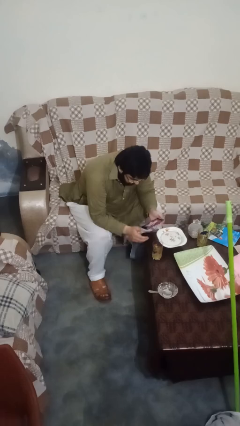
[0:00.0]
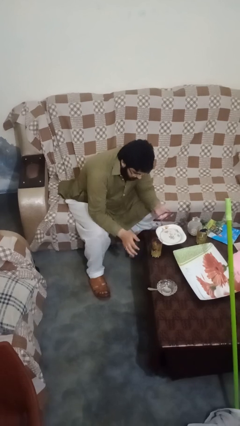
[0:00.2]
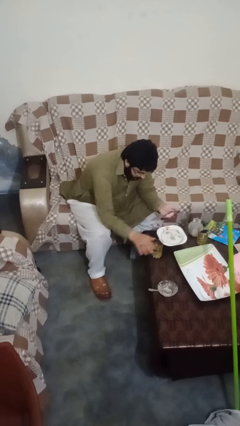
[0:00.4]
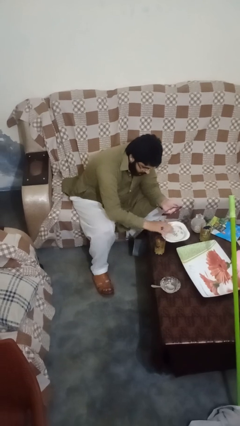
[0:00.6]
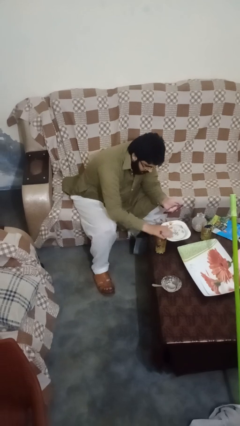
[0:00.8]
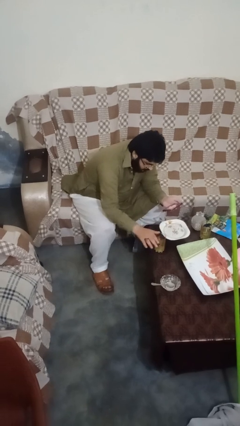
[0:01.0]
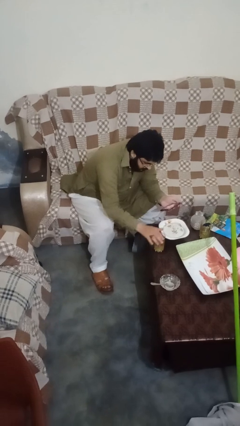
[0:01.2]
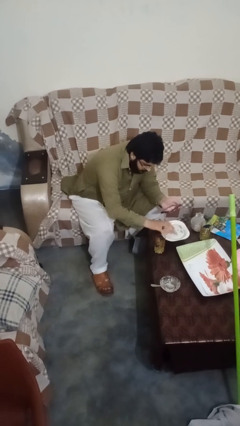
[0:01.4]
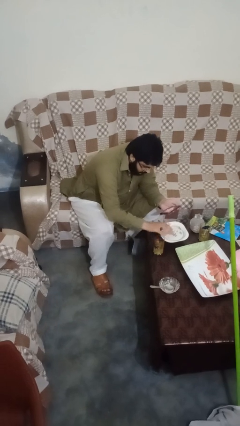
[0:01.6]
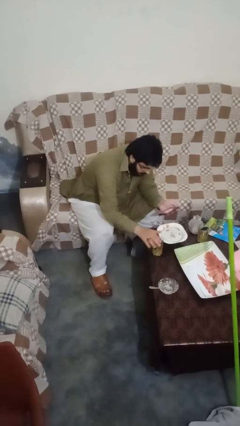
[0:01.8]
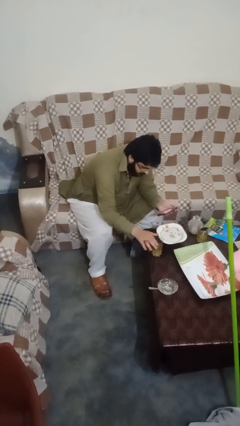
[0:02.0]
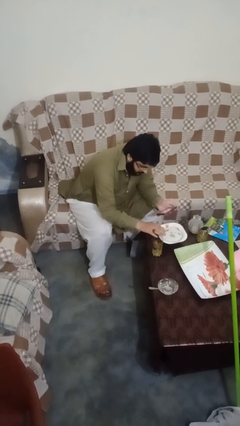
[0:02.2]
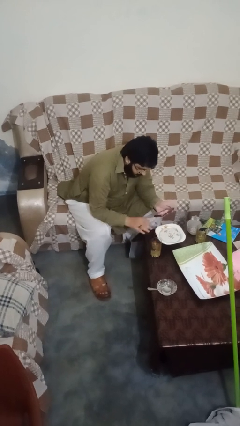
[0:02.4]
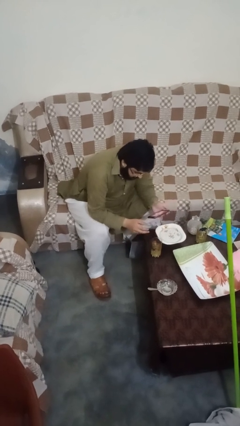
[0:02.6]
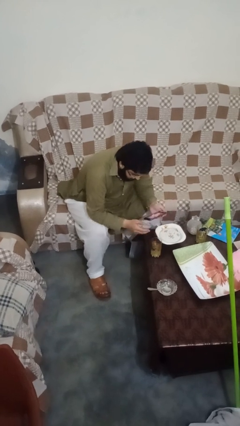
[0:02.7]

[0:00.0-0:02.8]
person waves hand over object

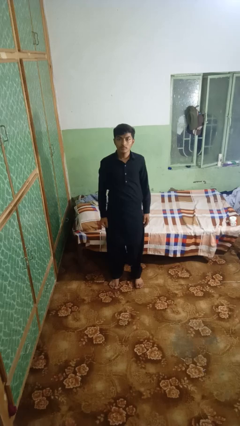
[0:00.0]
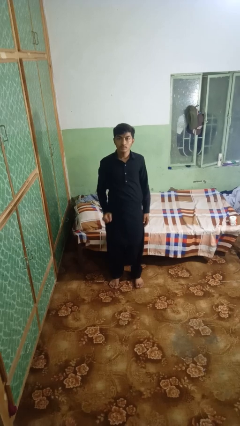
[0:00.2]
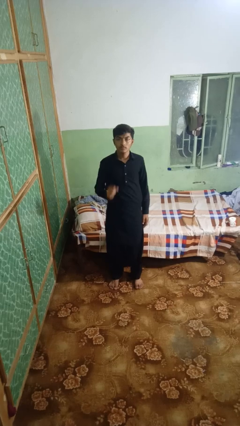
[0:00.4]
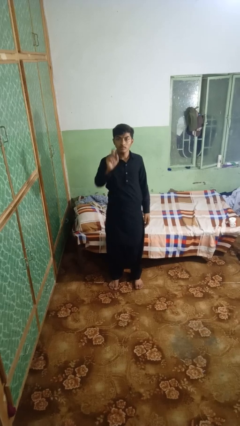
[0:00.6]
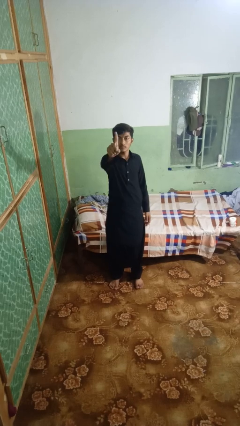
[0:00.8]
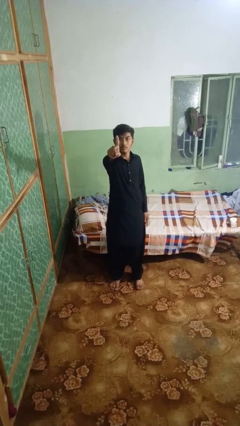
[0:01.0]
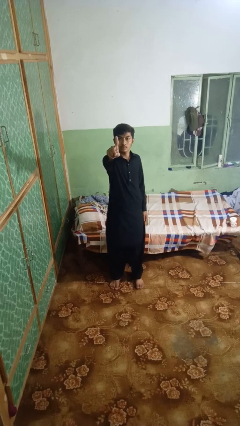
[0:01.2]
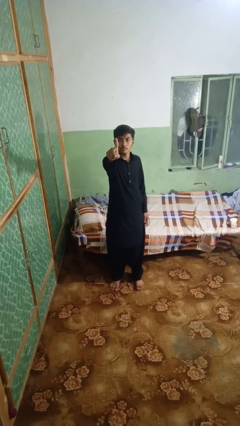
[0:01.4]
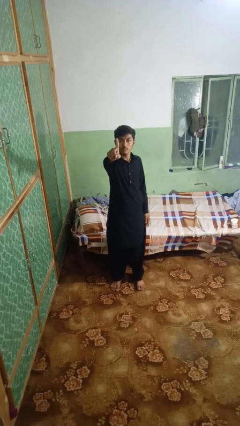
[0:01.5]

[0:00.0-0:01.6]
person gestures number one

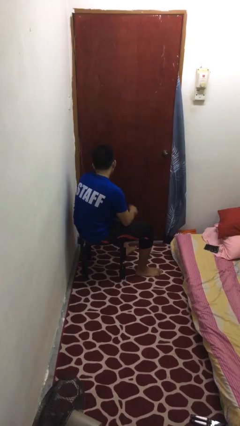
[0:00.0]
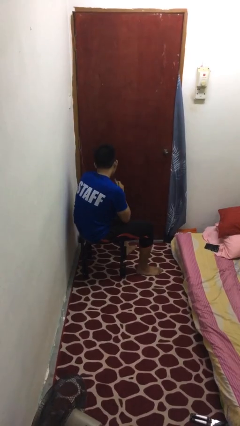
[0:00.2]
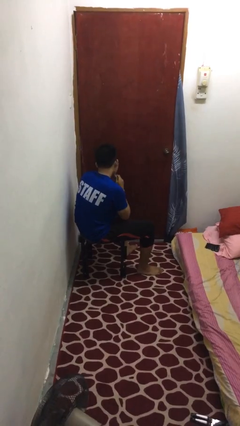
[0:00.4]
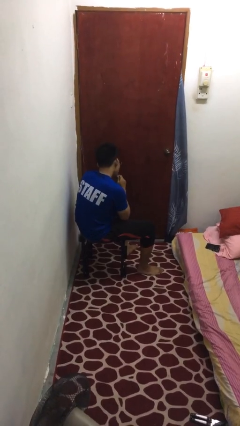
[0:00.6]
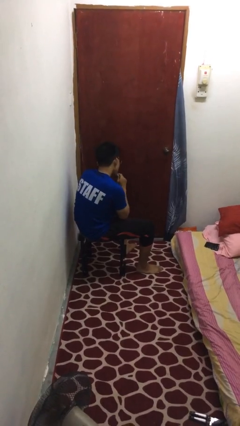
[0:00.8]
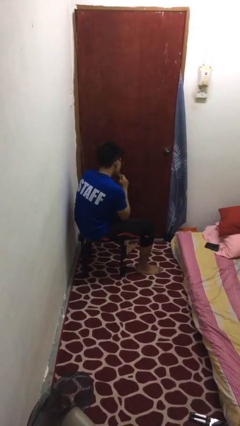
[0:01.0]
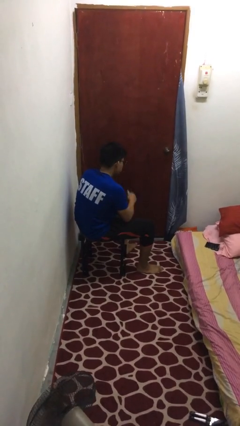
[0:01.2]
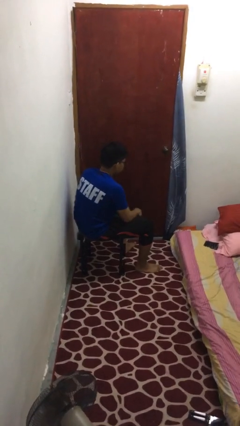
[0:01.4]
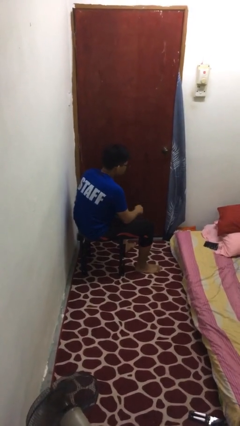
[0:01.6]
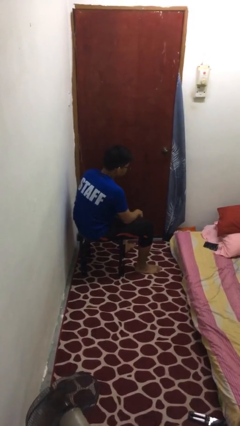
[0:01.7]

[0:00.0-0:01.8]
person vapes

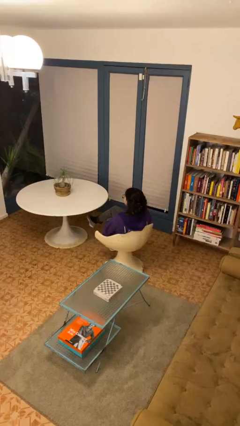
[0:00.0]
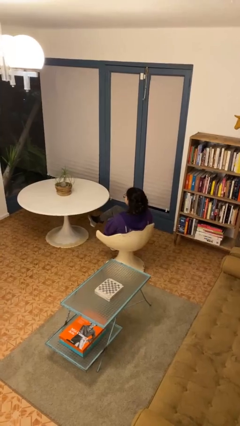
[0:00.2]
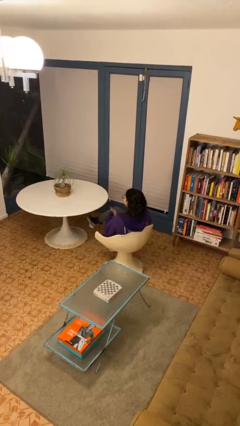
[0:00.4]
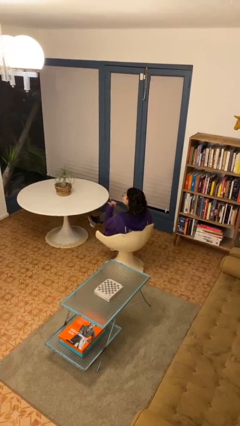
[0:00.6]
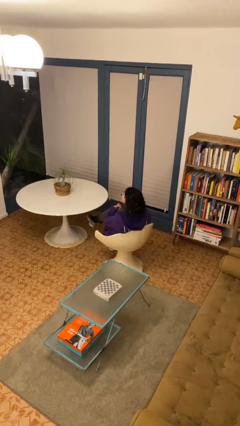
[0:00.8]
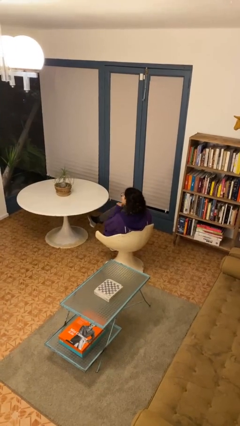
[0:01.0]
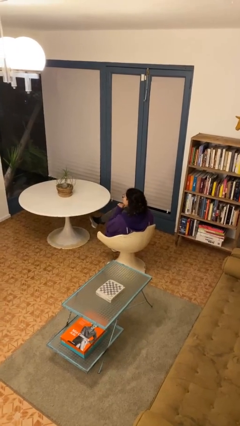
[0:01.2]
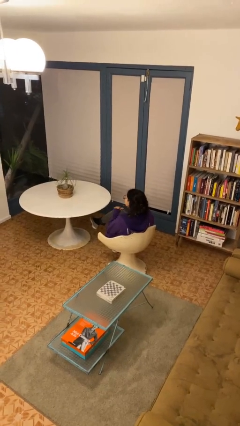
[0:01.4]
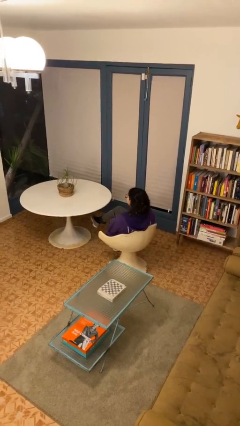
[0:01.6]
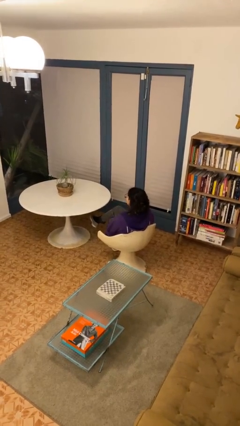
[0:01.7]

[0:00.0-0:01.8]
person gestures cut

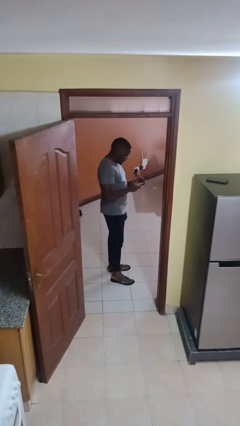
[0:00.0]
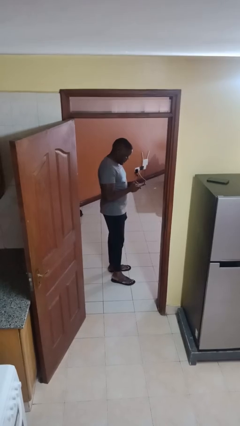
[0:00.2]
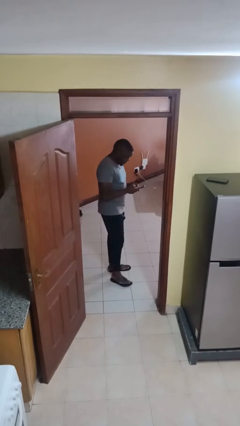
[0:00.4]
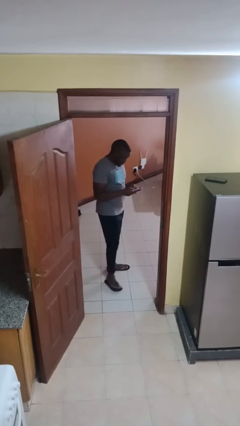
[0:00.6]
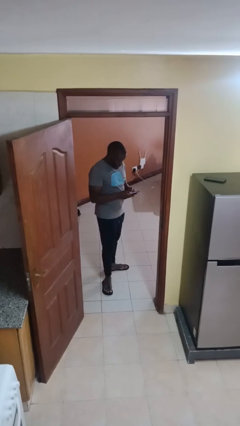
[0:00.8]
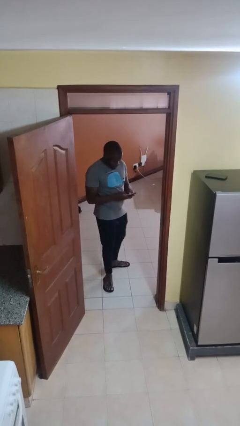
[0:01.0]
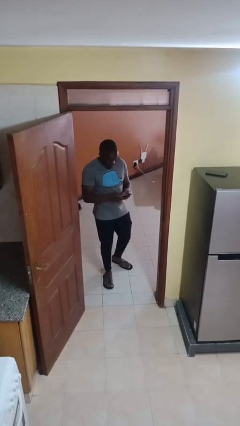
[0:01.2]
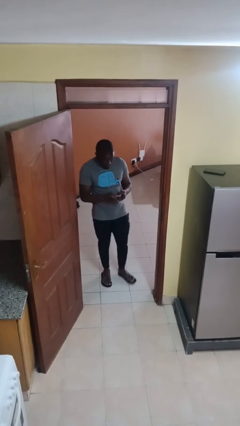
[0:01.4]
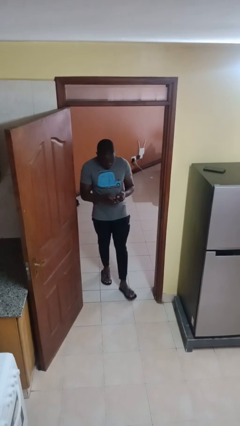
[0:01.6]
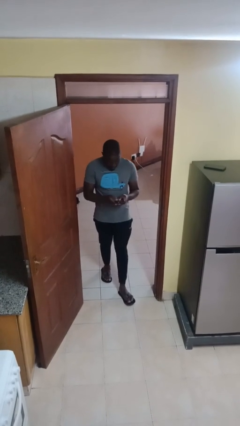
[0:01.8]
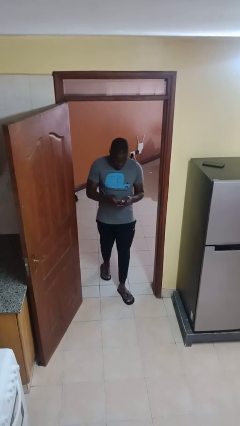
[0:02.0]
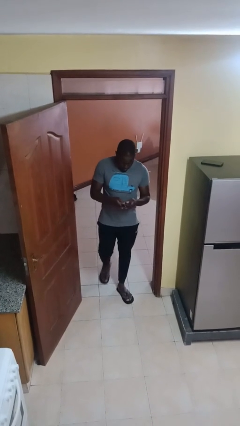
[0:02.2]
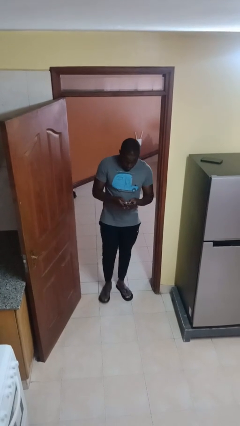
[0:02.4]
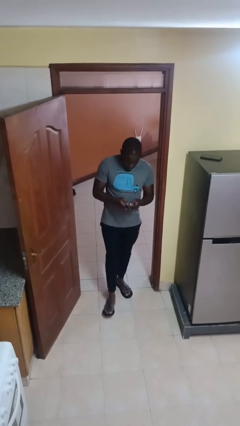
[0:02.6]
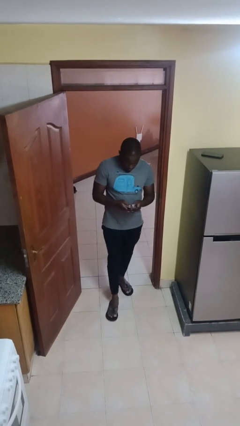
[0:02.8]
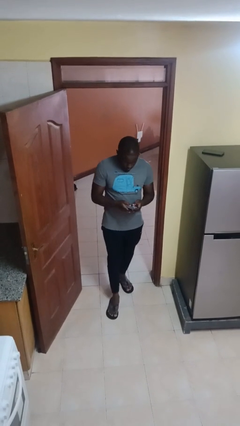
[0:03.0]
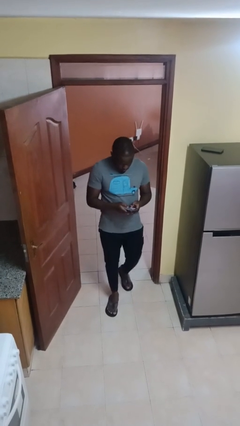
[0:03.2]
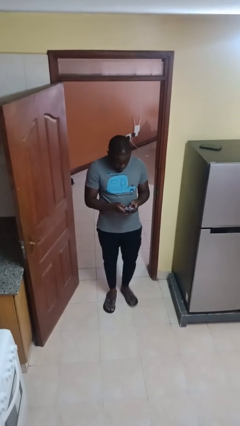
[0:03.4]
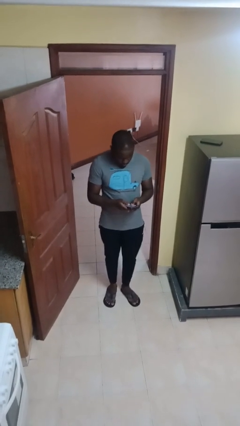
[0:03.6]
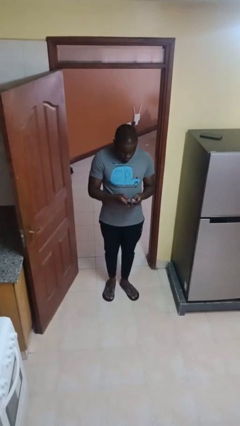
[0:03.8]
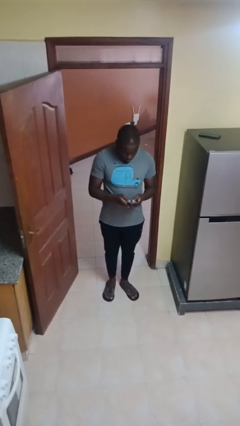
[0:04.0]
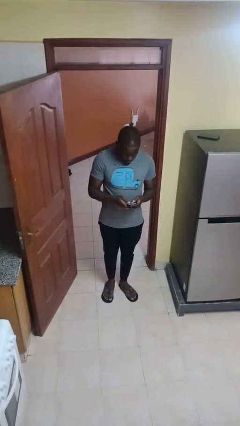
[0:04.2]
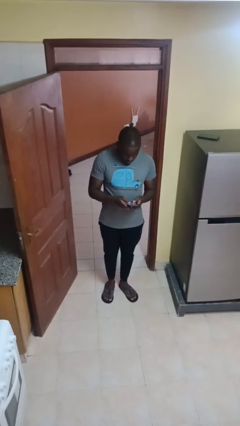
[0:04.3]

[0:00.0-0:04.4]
person enters scene through structure

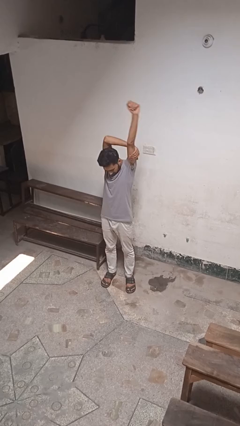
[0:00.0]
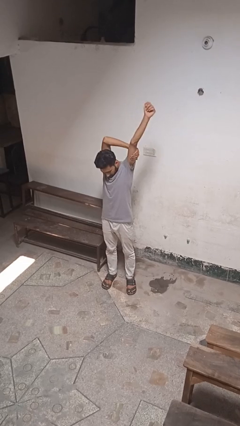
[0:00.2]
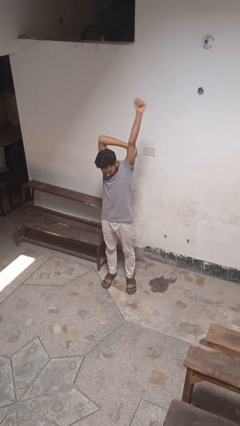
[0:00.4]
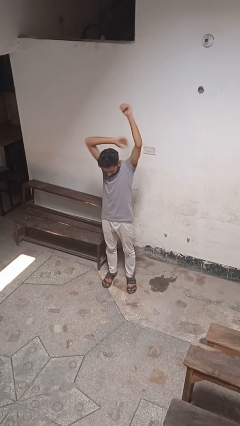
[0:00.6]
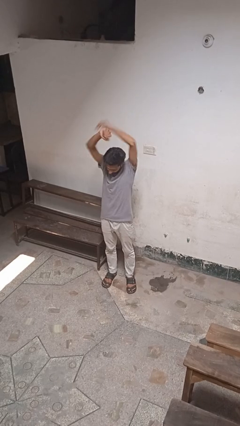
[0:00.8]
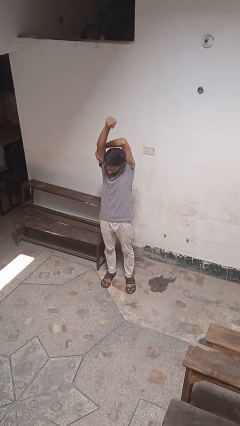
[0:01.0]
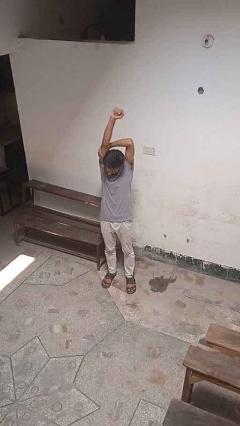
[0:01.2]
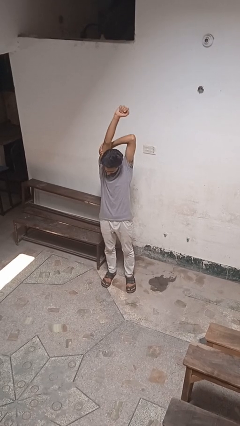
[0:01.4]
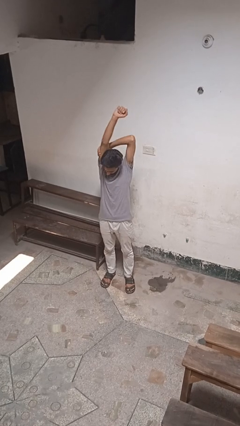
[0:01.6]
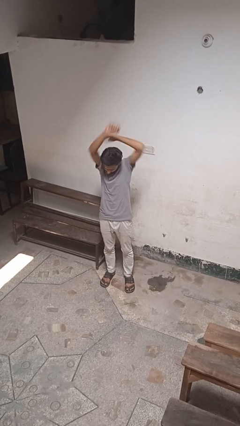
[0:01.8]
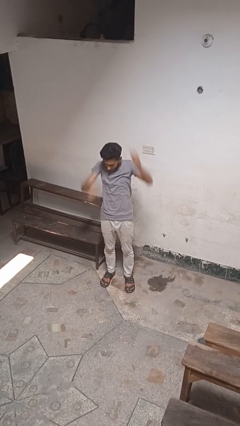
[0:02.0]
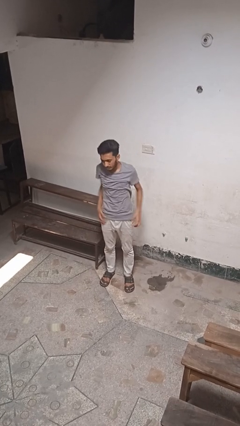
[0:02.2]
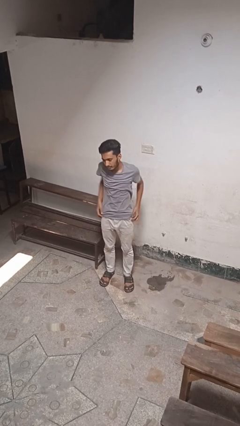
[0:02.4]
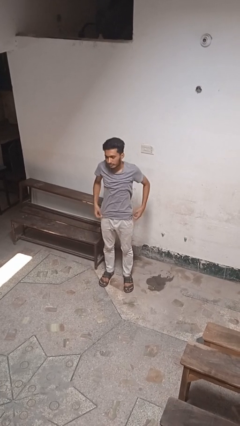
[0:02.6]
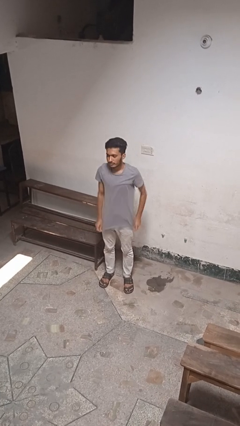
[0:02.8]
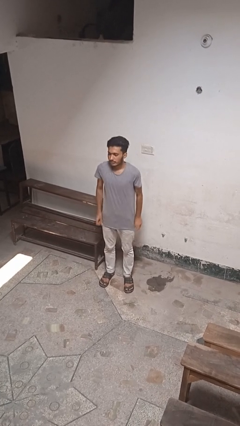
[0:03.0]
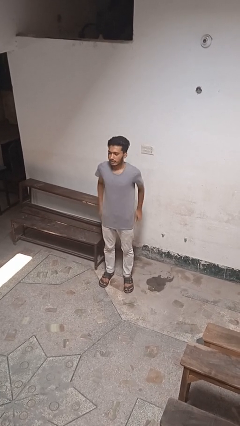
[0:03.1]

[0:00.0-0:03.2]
person puts feet up

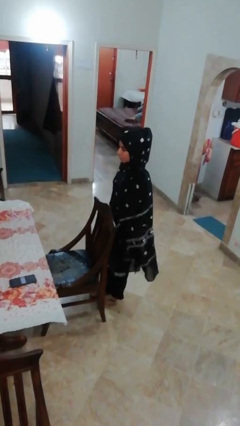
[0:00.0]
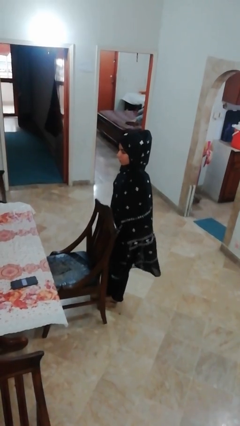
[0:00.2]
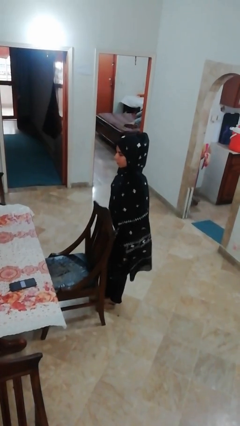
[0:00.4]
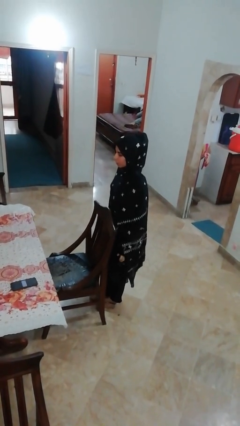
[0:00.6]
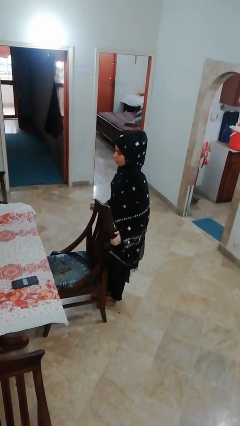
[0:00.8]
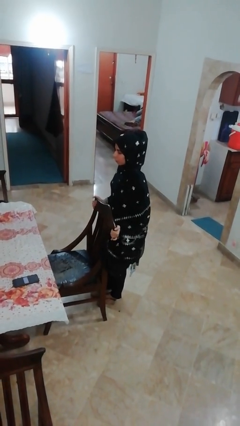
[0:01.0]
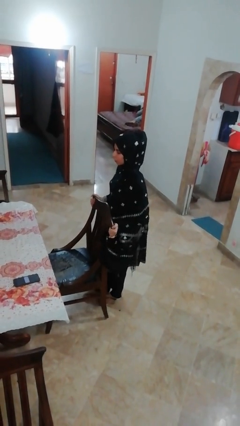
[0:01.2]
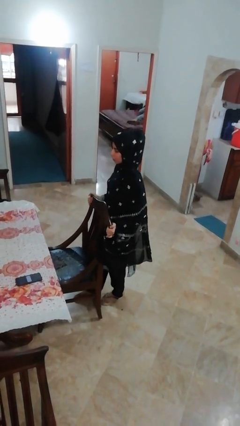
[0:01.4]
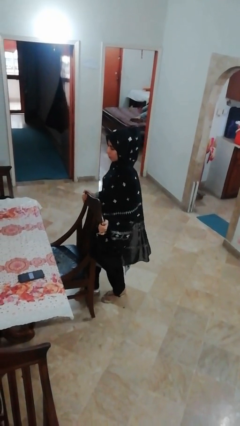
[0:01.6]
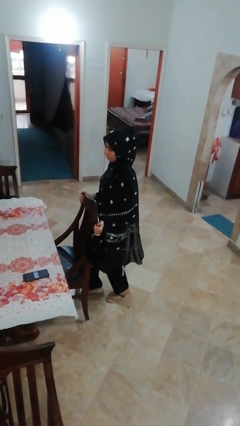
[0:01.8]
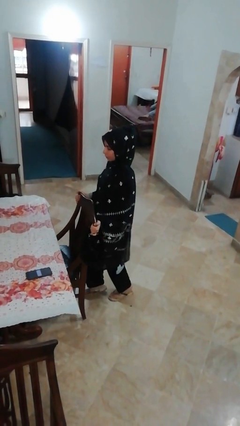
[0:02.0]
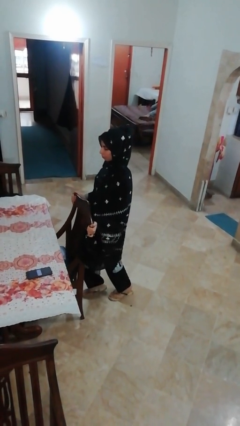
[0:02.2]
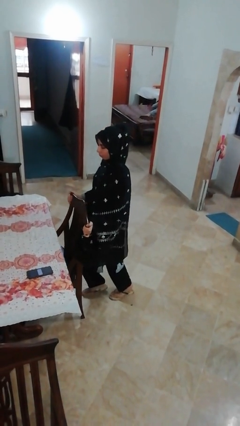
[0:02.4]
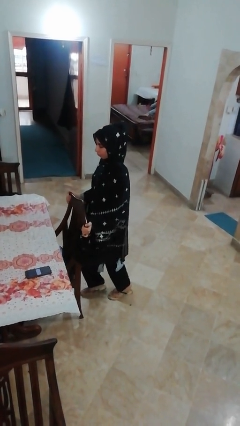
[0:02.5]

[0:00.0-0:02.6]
person pushes in chair
